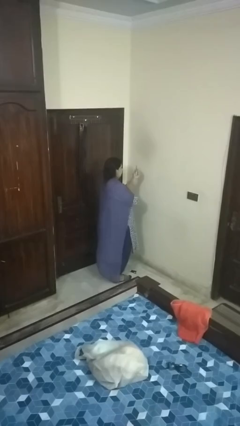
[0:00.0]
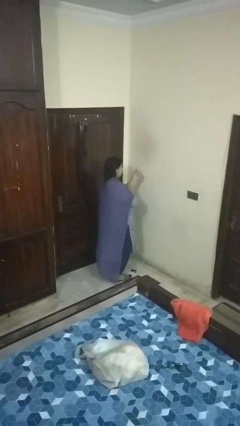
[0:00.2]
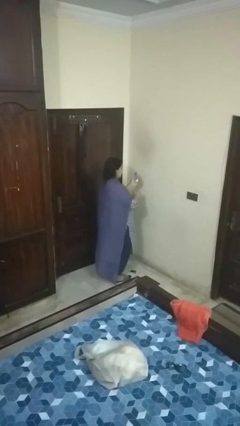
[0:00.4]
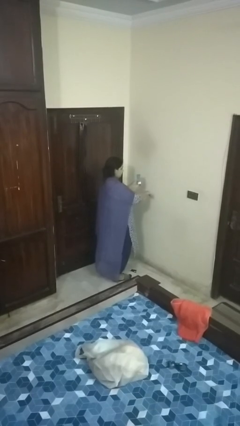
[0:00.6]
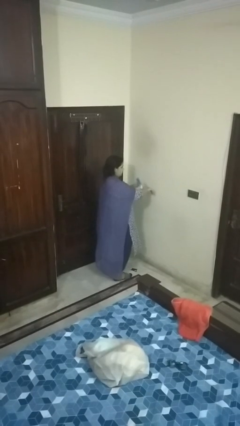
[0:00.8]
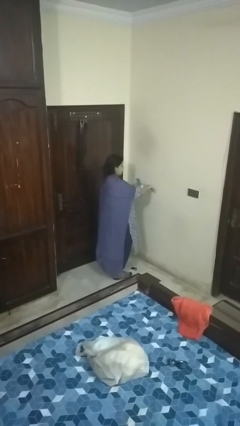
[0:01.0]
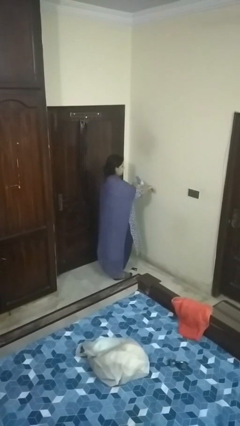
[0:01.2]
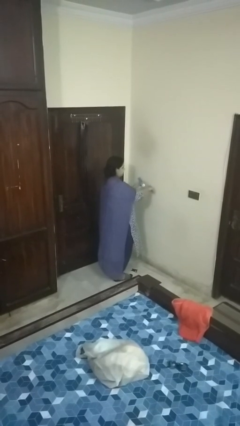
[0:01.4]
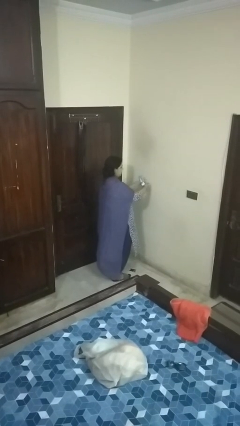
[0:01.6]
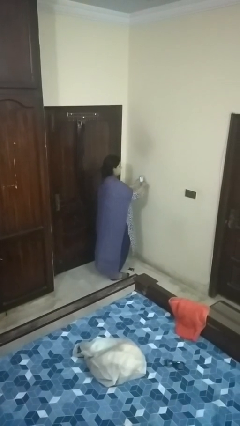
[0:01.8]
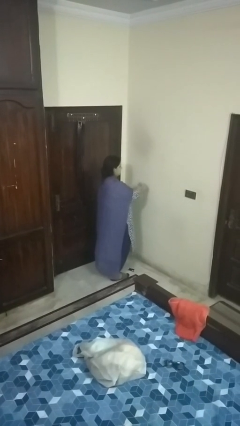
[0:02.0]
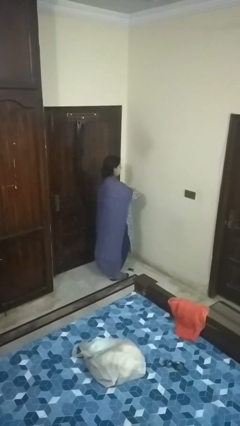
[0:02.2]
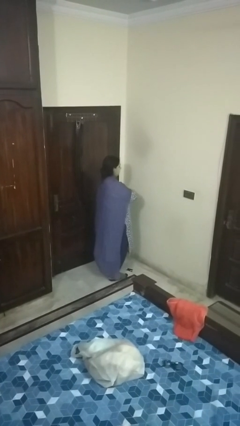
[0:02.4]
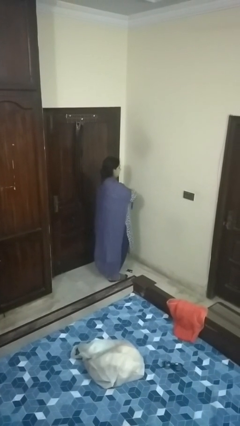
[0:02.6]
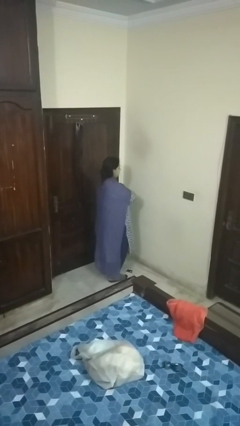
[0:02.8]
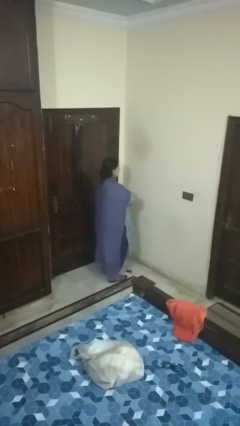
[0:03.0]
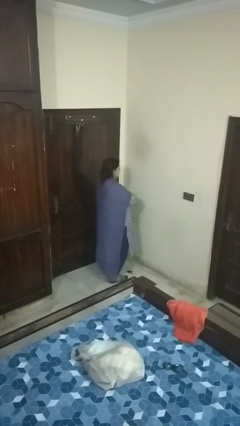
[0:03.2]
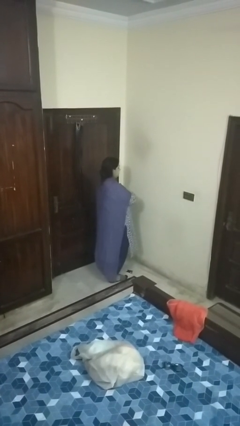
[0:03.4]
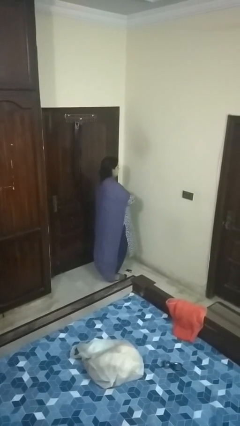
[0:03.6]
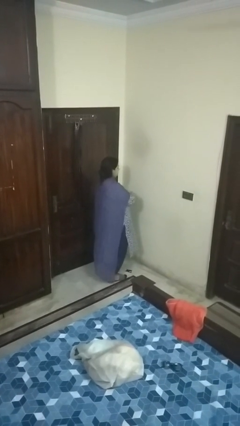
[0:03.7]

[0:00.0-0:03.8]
person applies sunscreen

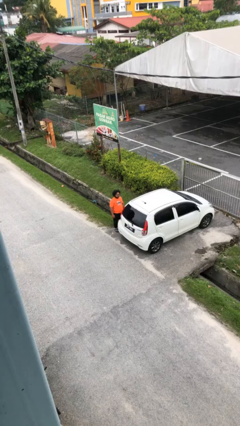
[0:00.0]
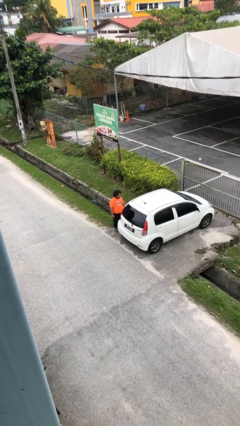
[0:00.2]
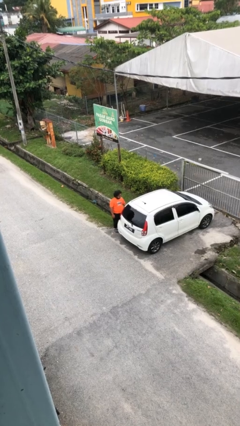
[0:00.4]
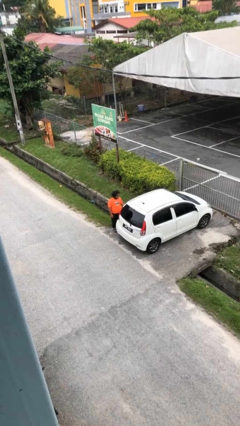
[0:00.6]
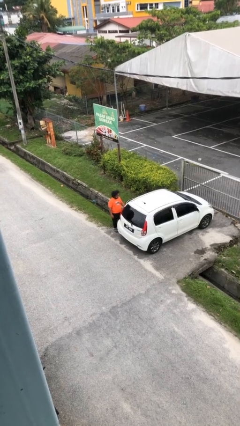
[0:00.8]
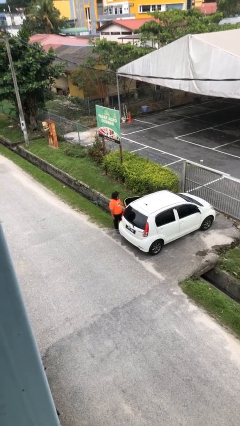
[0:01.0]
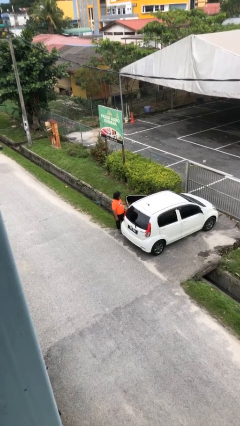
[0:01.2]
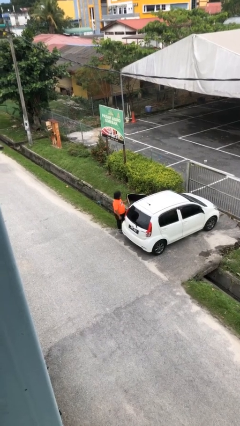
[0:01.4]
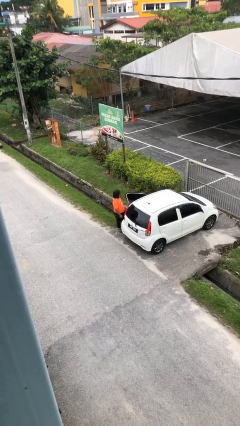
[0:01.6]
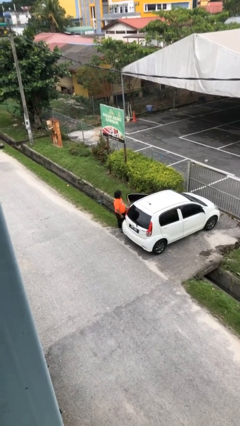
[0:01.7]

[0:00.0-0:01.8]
person opens car door

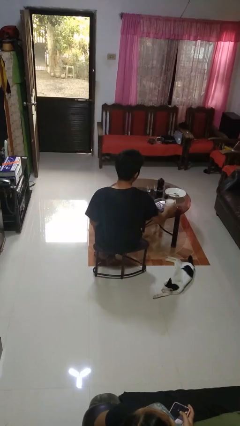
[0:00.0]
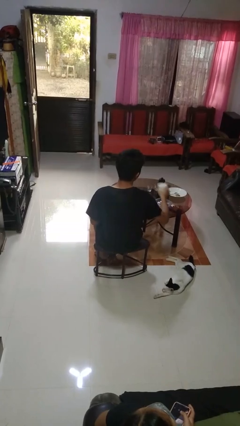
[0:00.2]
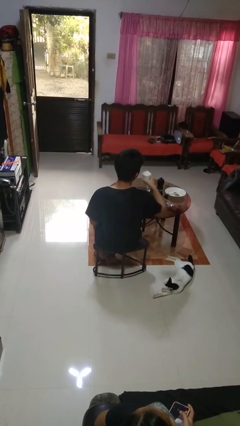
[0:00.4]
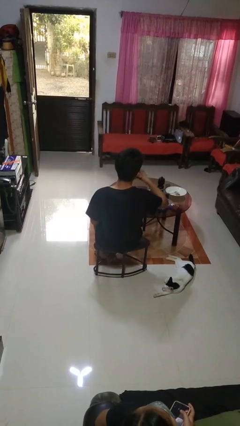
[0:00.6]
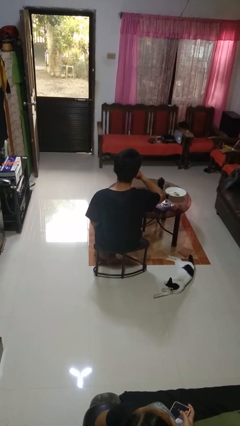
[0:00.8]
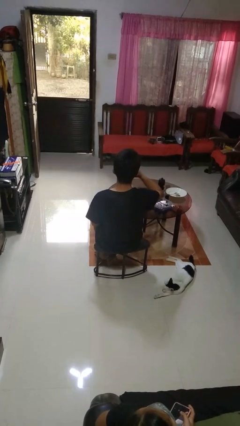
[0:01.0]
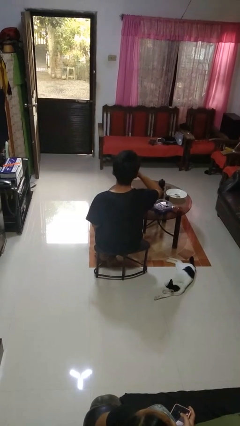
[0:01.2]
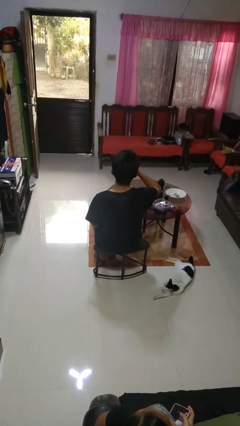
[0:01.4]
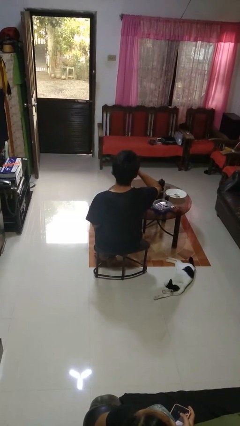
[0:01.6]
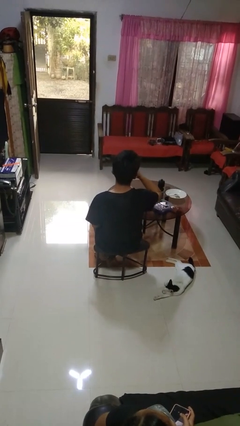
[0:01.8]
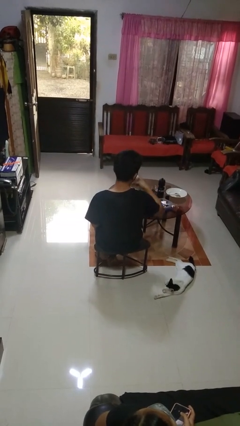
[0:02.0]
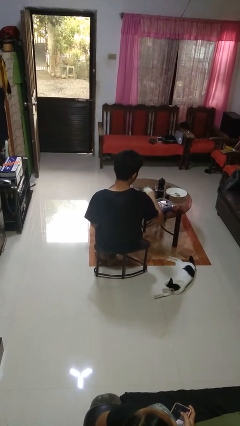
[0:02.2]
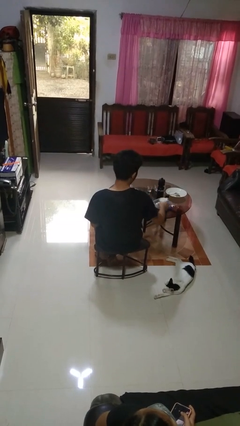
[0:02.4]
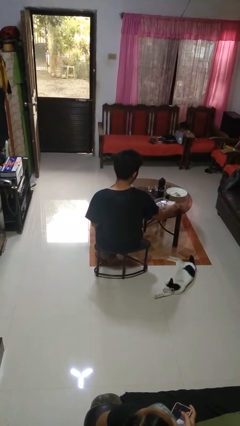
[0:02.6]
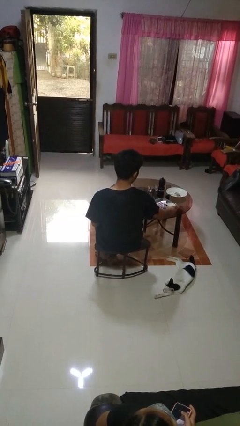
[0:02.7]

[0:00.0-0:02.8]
person drinks from cup

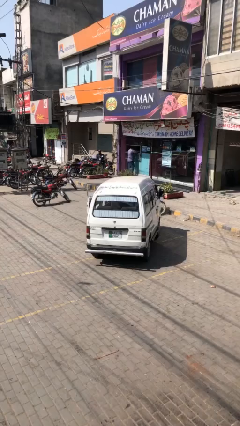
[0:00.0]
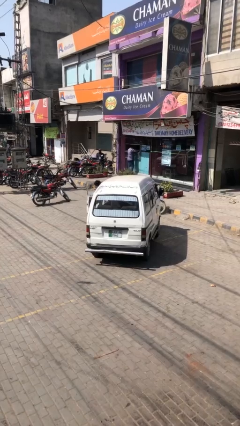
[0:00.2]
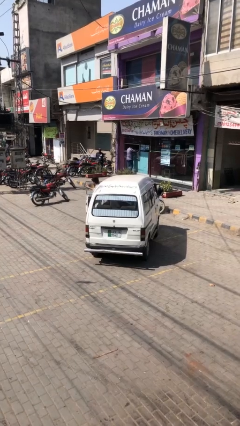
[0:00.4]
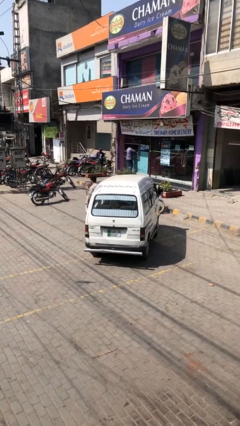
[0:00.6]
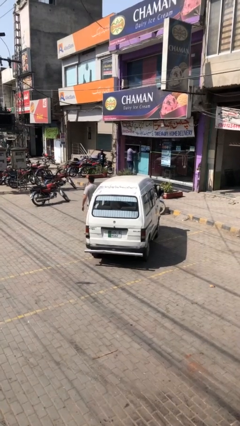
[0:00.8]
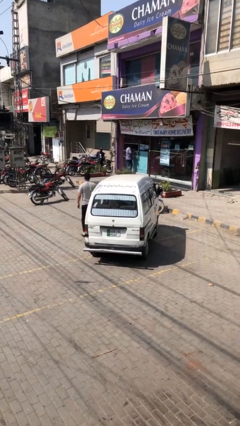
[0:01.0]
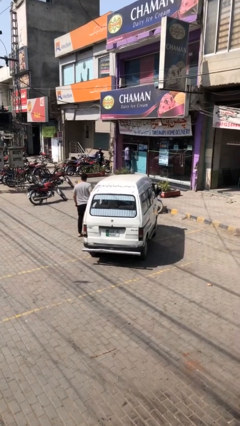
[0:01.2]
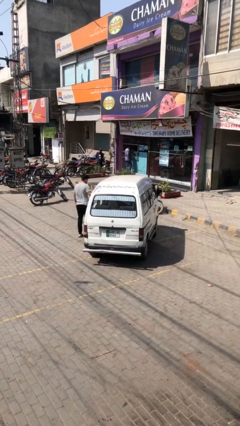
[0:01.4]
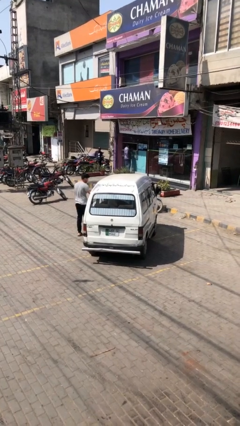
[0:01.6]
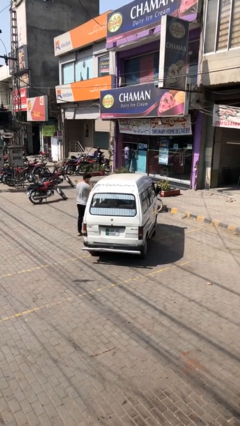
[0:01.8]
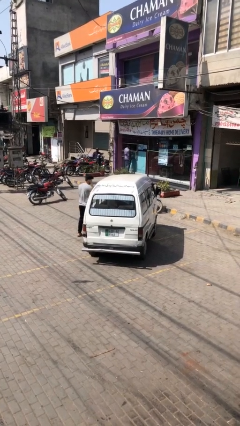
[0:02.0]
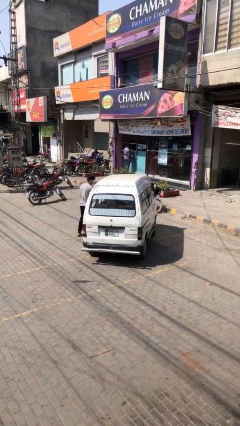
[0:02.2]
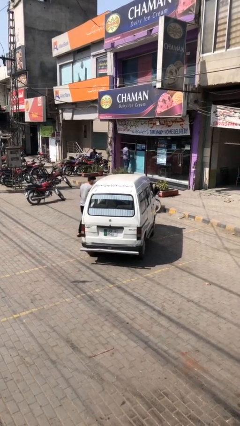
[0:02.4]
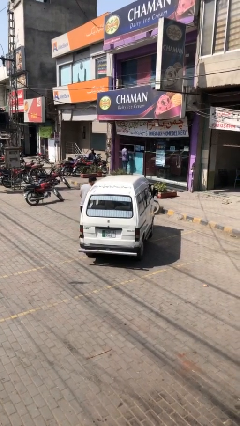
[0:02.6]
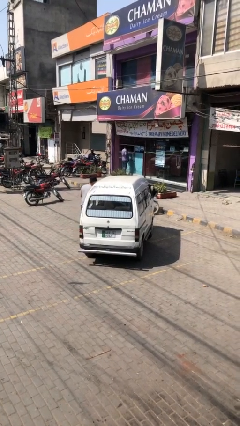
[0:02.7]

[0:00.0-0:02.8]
car drops off person

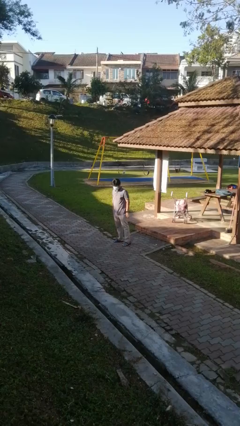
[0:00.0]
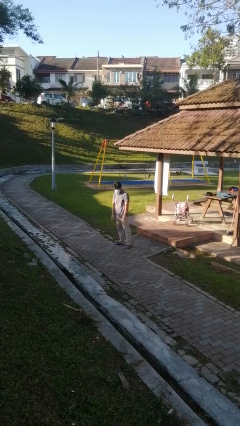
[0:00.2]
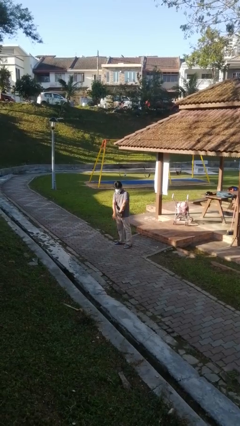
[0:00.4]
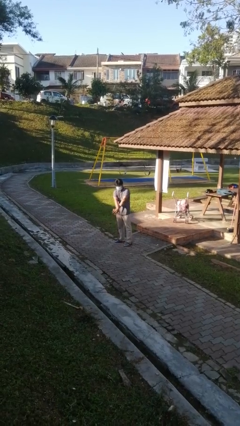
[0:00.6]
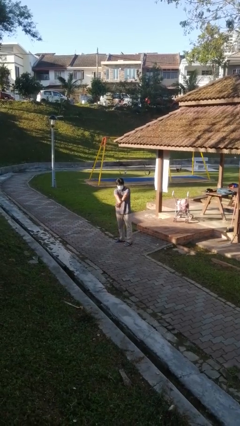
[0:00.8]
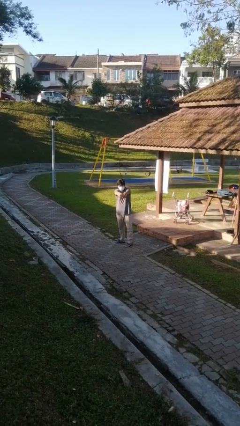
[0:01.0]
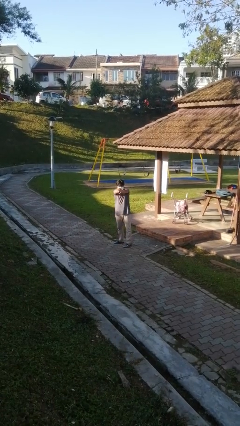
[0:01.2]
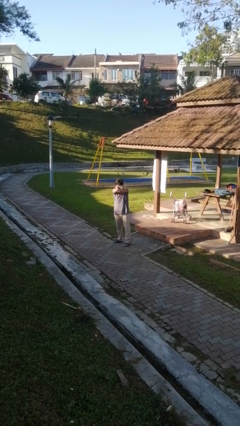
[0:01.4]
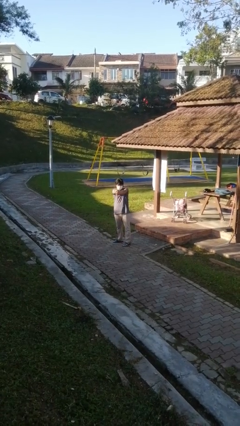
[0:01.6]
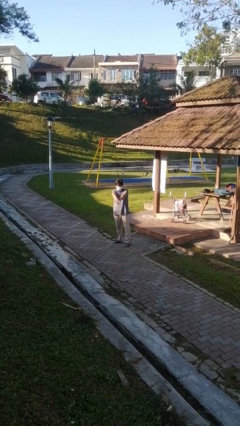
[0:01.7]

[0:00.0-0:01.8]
person crosses arms

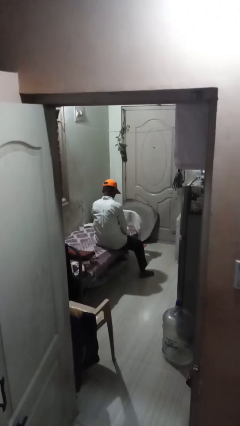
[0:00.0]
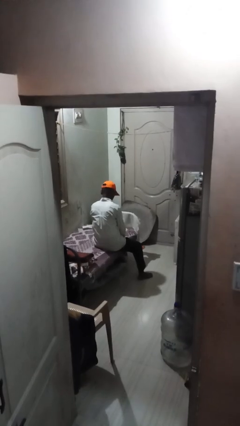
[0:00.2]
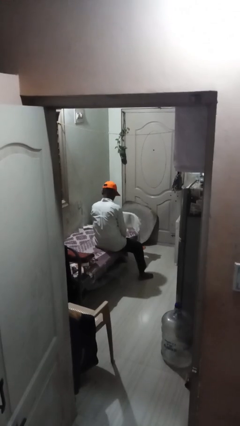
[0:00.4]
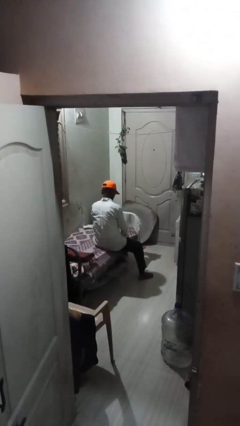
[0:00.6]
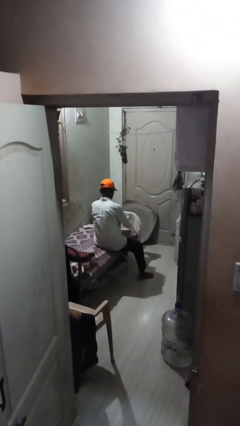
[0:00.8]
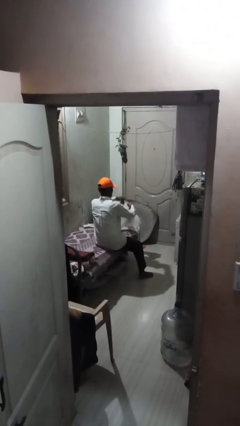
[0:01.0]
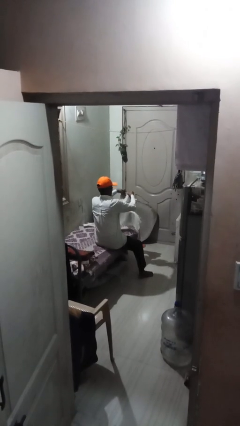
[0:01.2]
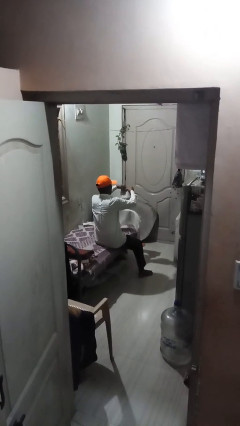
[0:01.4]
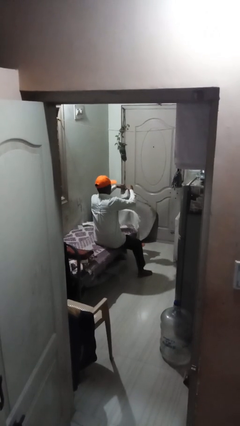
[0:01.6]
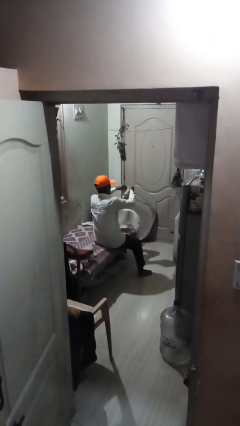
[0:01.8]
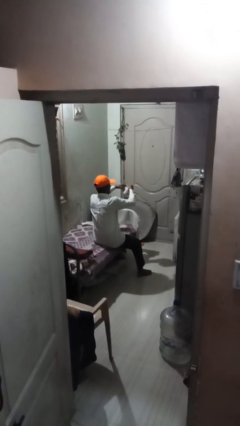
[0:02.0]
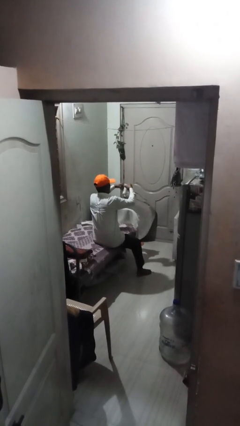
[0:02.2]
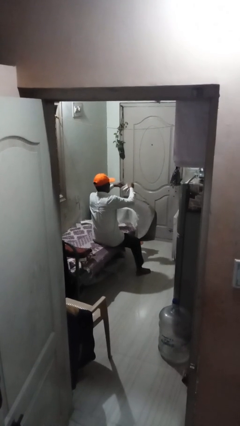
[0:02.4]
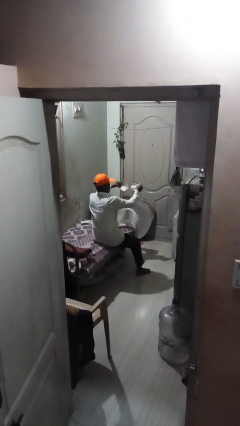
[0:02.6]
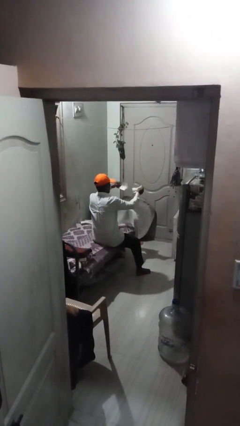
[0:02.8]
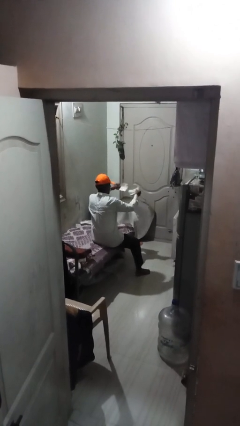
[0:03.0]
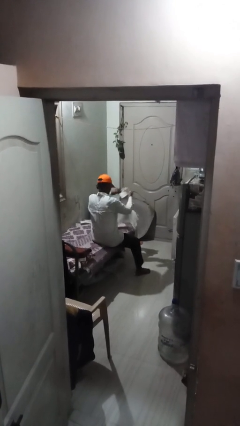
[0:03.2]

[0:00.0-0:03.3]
person tears paper

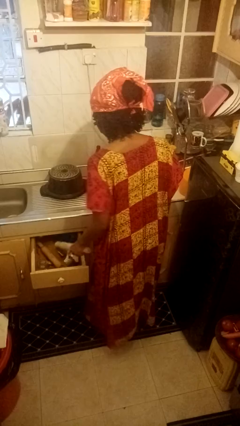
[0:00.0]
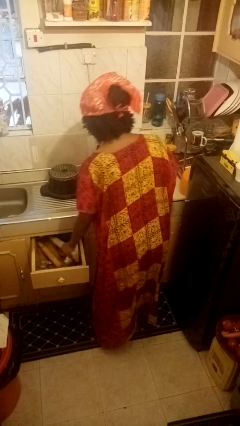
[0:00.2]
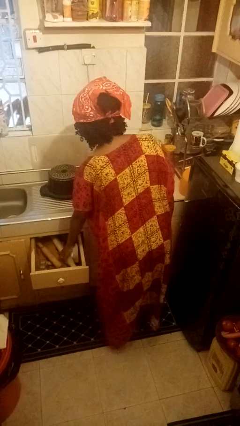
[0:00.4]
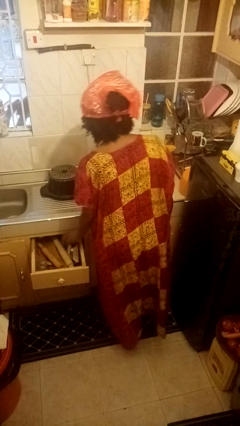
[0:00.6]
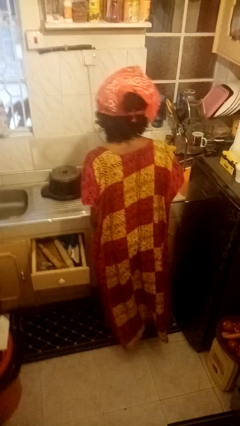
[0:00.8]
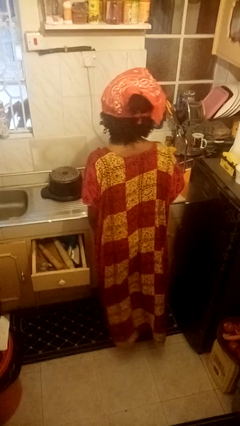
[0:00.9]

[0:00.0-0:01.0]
person puts object into kitchen drawer
